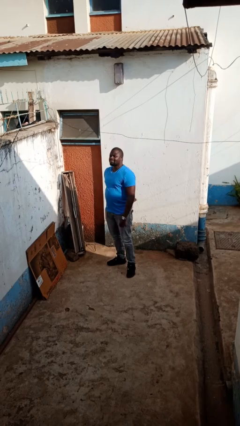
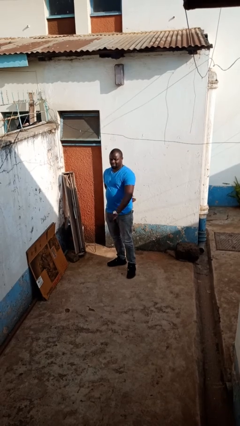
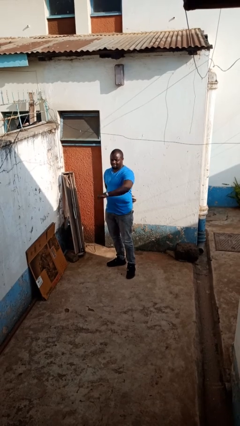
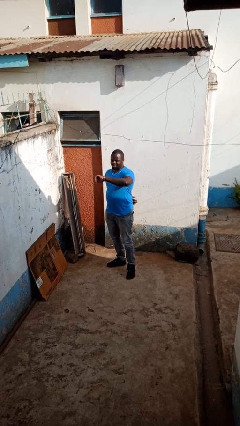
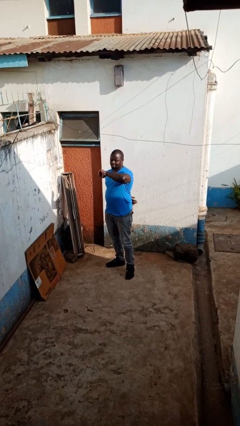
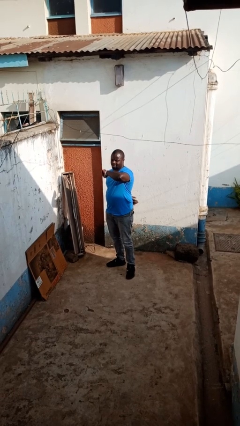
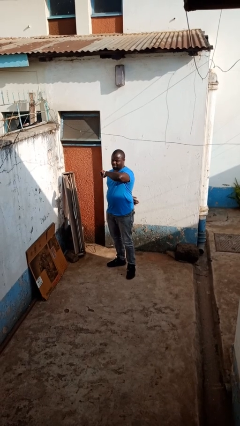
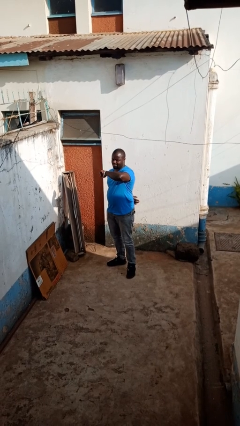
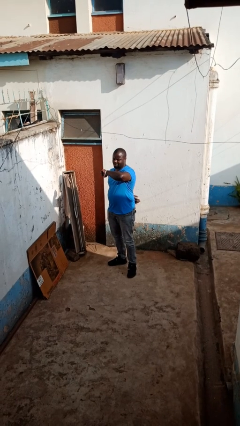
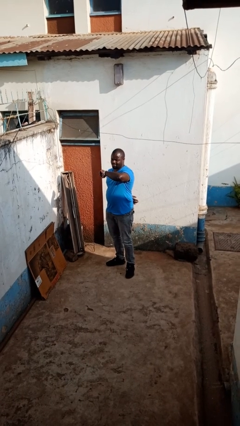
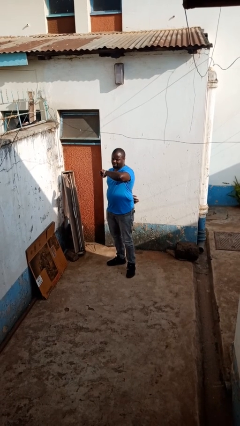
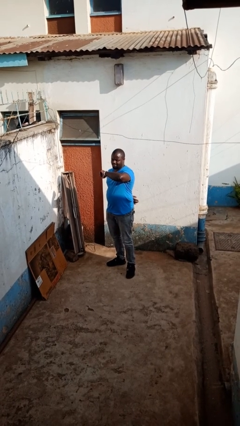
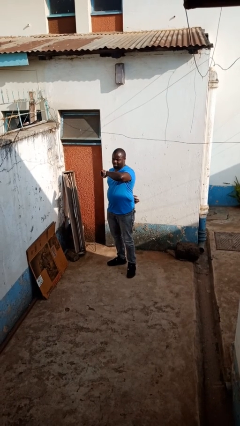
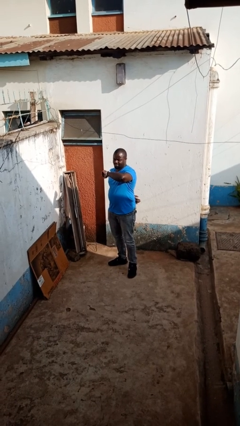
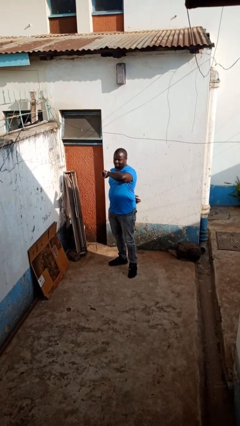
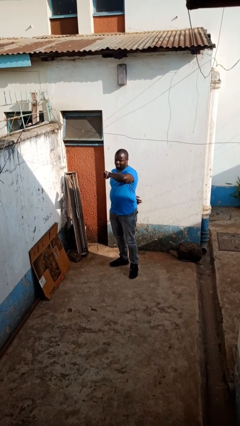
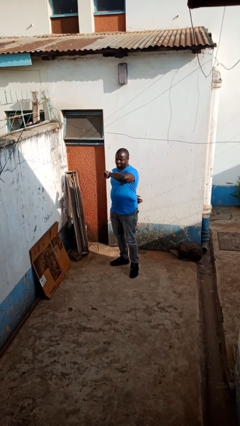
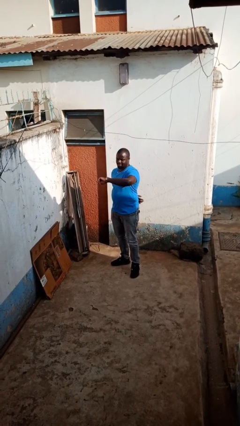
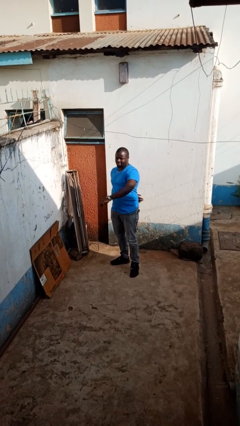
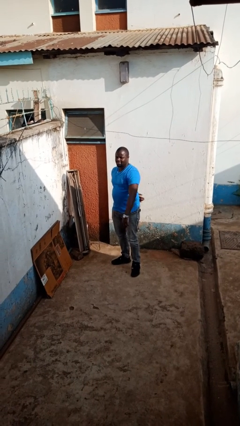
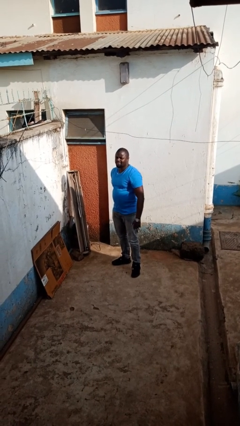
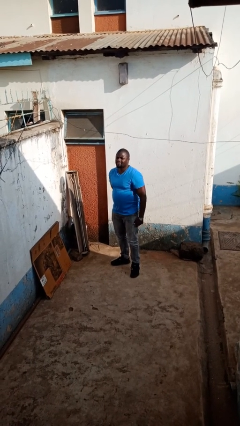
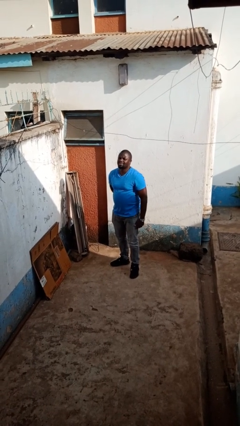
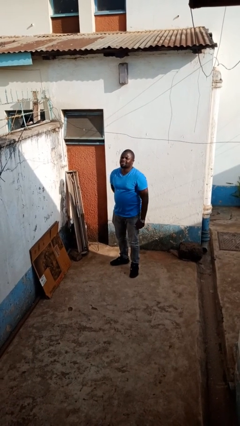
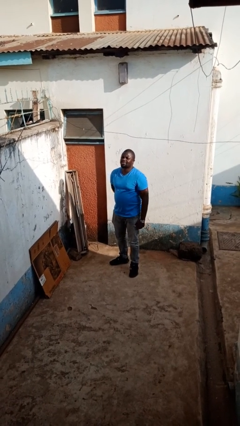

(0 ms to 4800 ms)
person looks at wristwatch

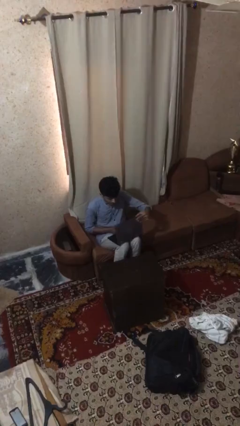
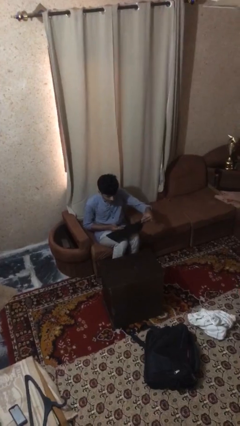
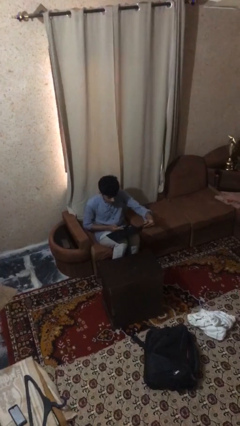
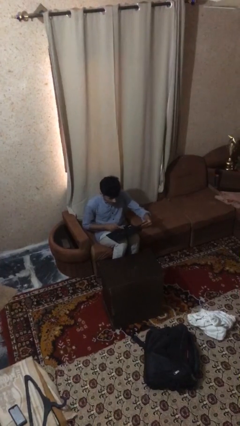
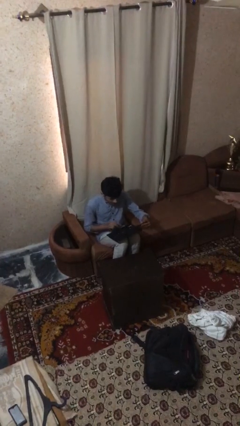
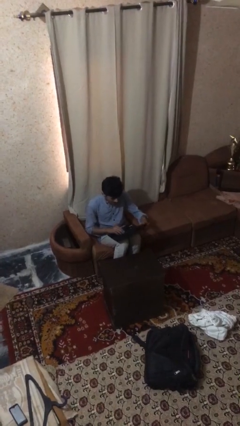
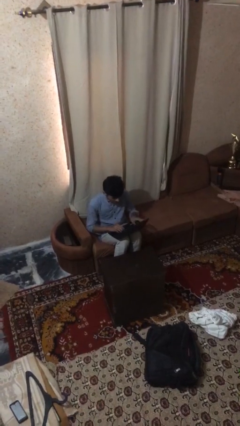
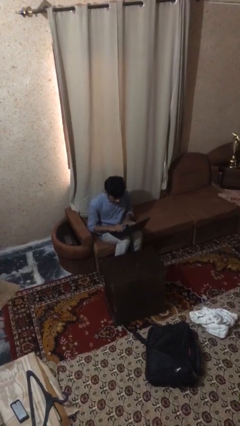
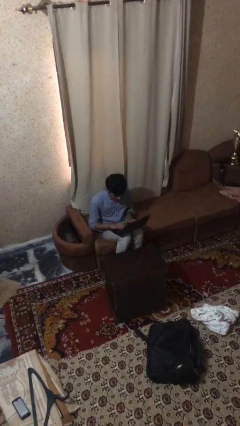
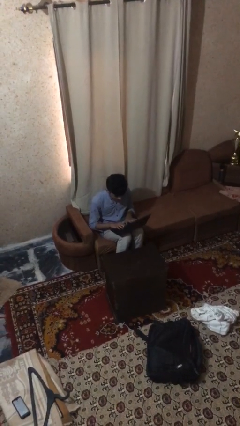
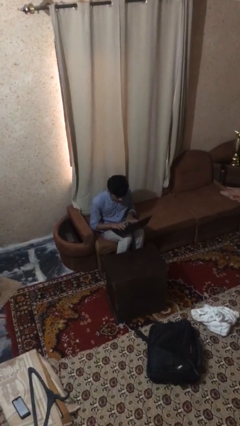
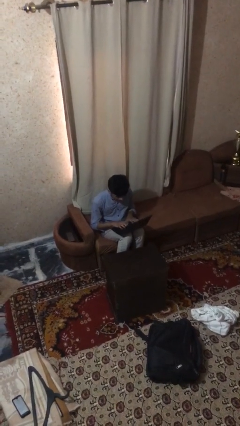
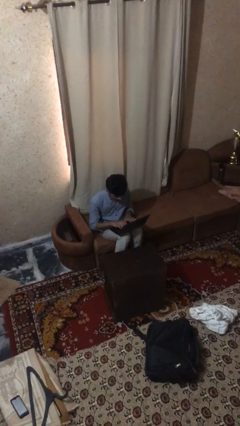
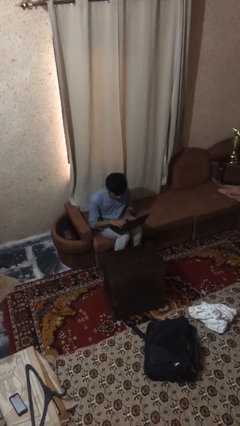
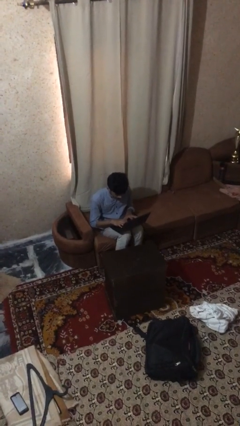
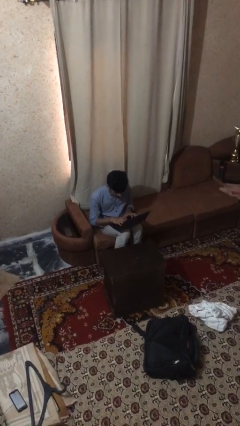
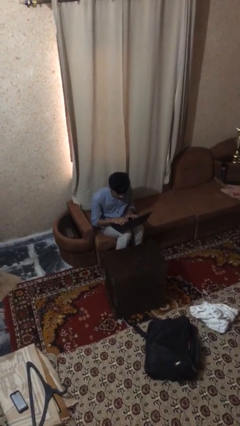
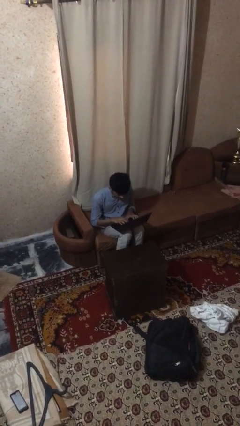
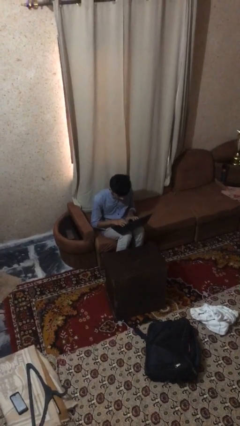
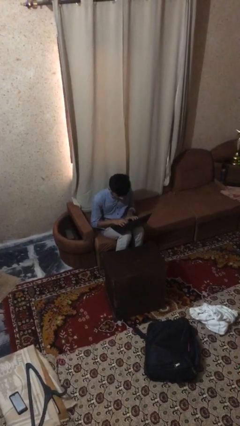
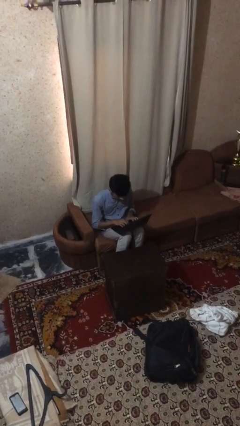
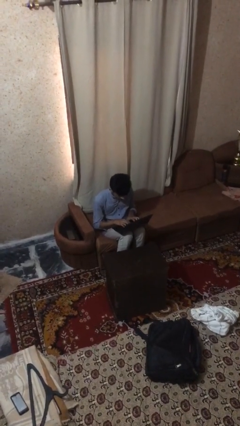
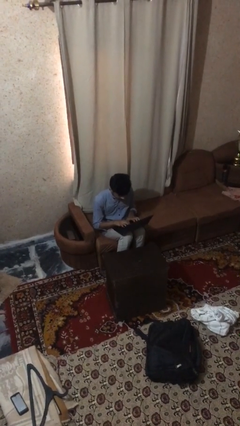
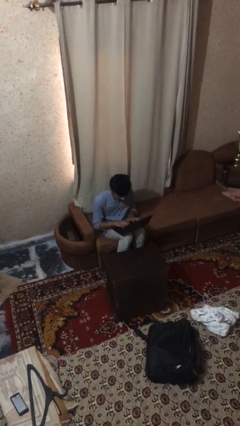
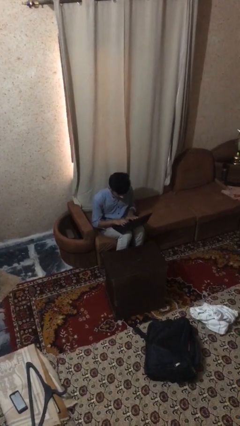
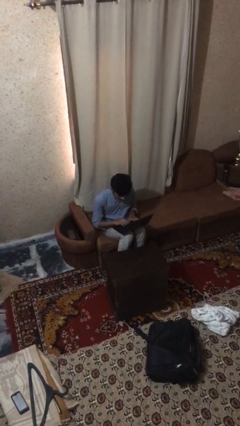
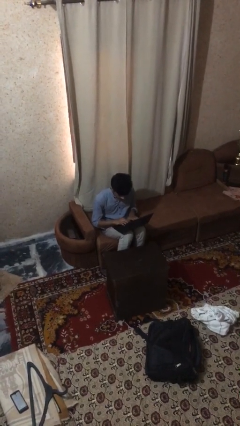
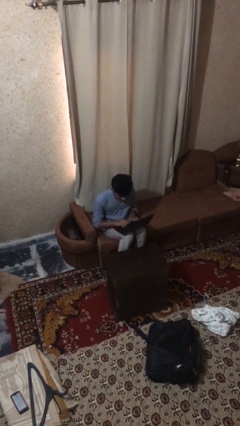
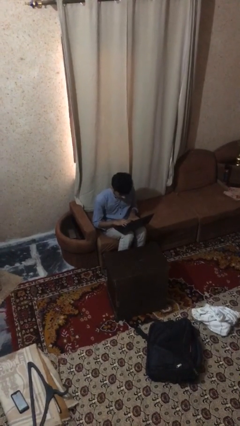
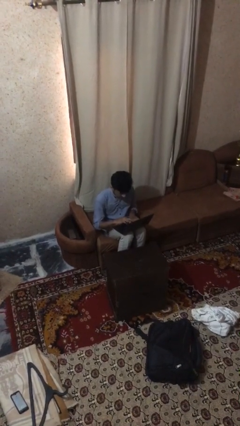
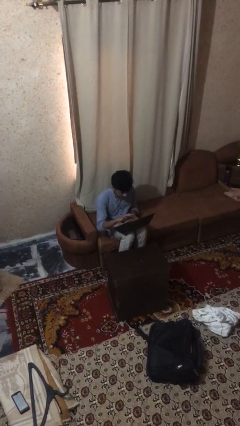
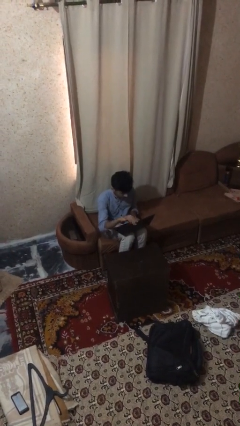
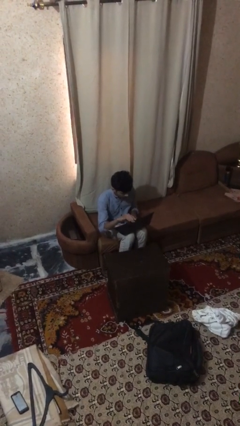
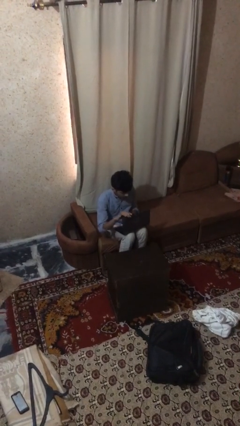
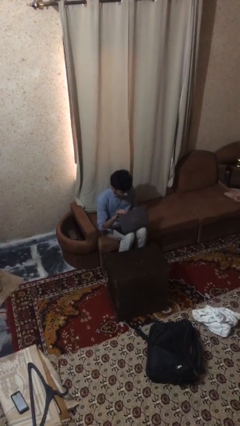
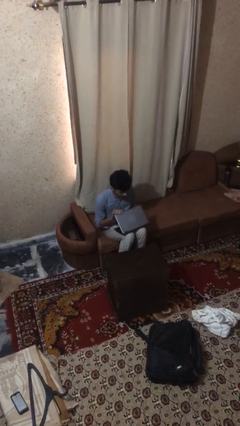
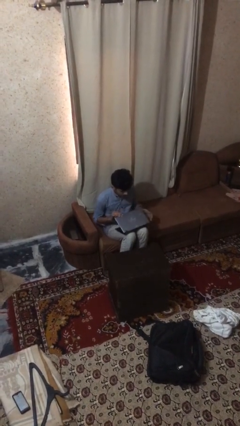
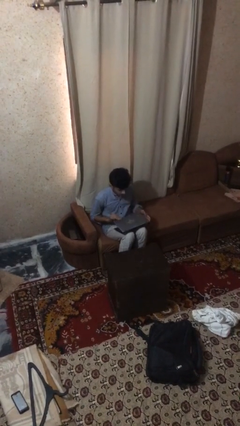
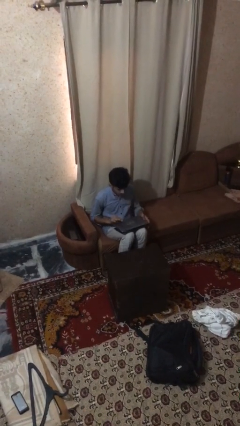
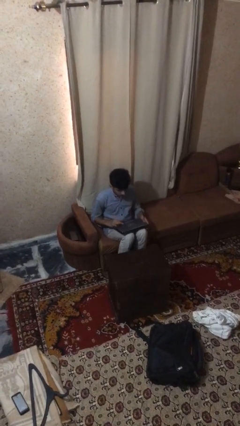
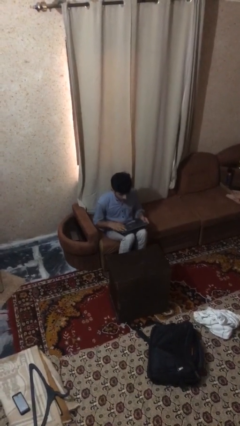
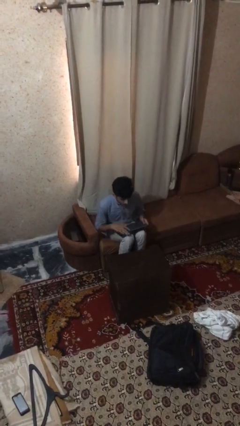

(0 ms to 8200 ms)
person interacts with laptop

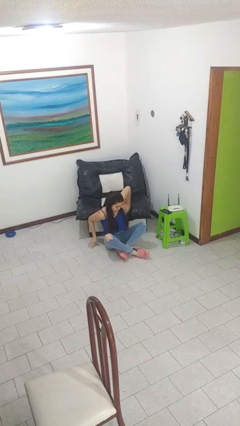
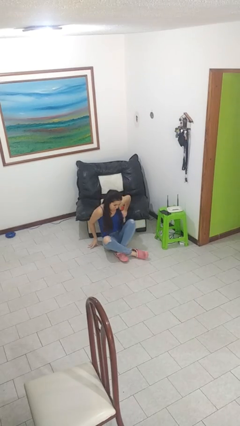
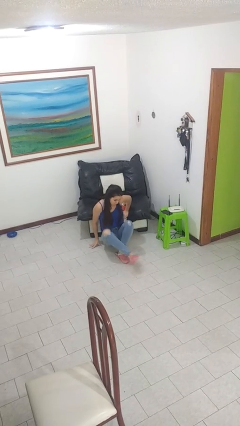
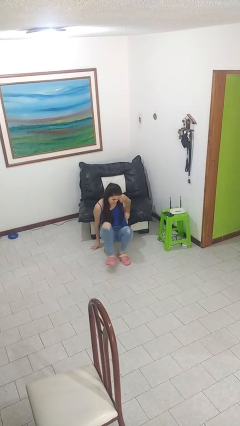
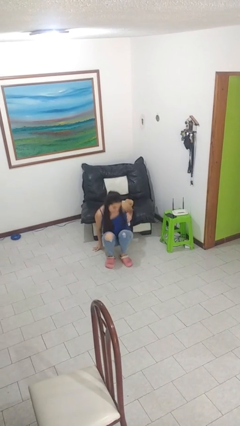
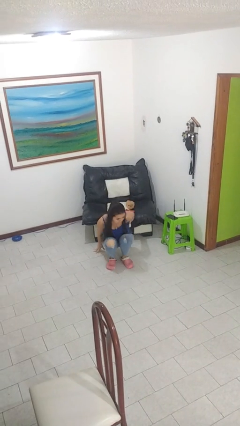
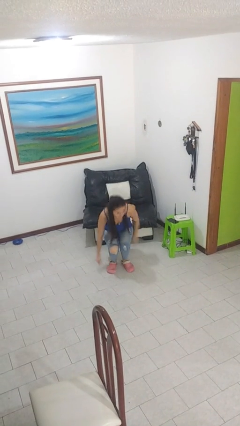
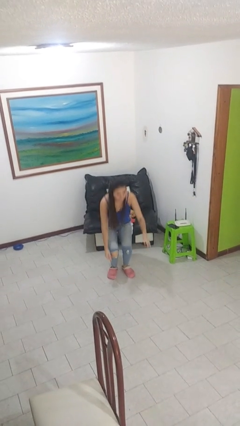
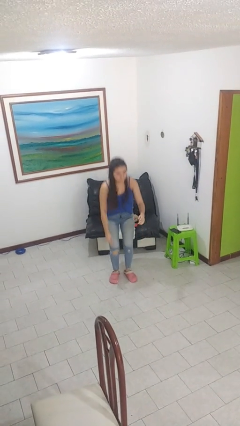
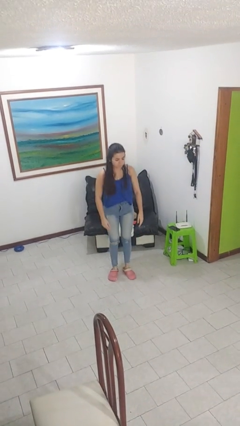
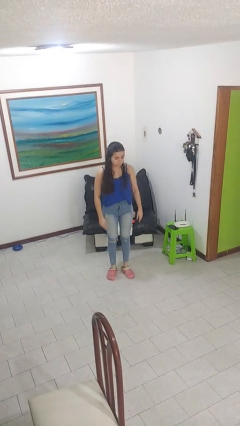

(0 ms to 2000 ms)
person stands up from floor

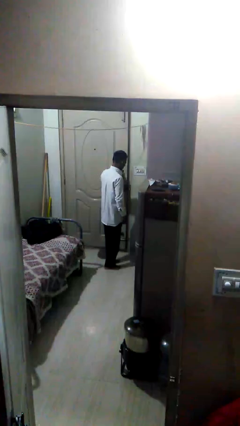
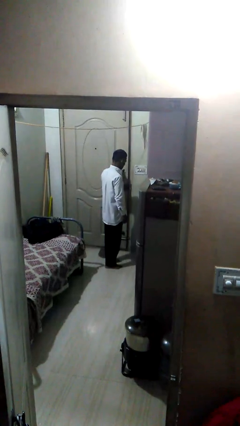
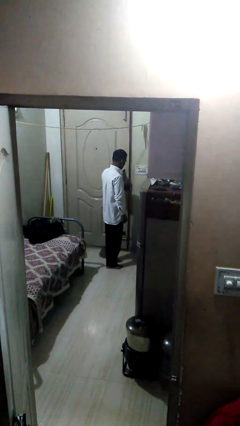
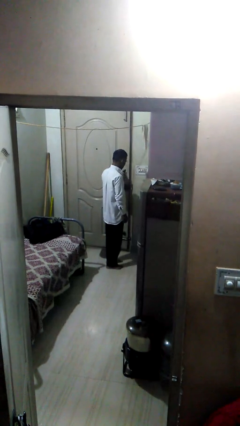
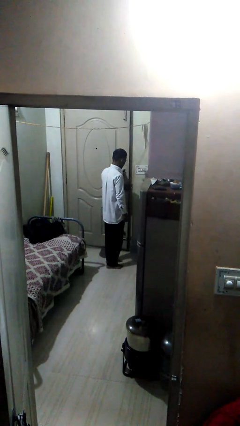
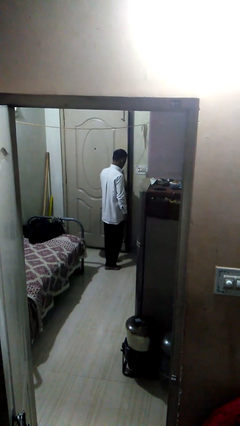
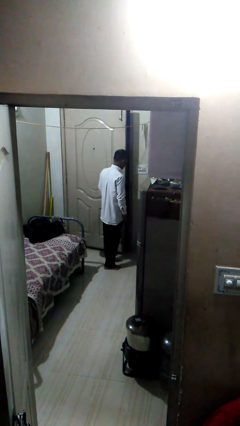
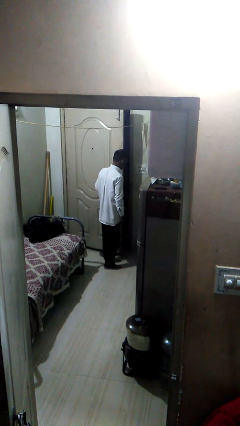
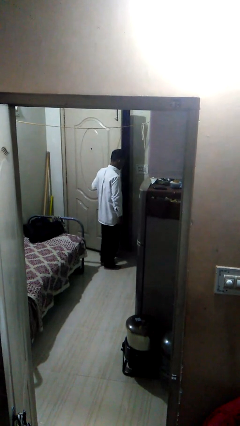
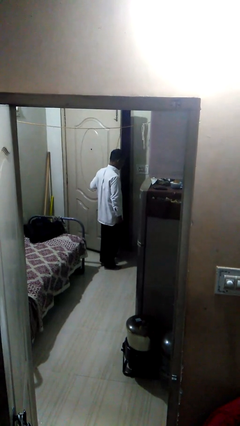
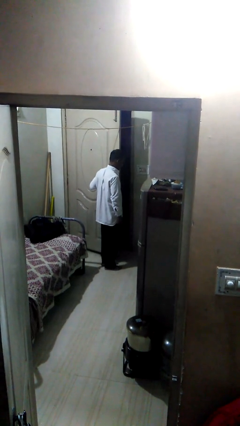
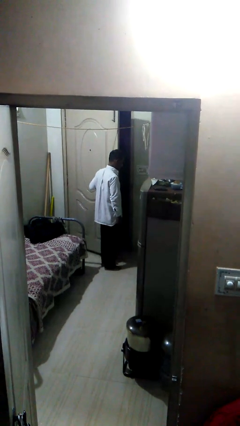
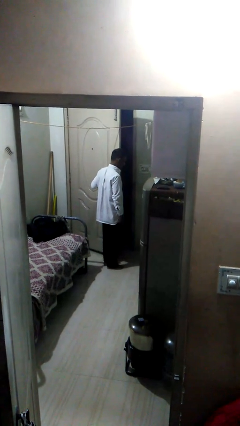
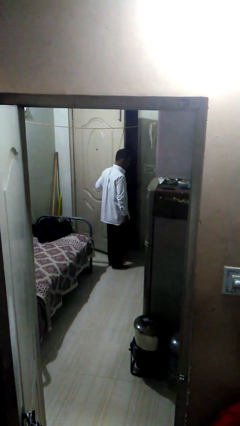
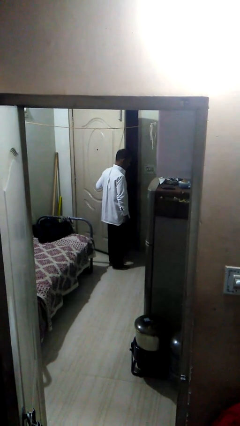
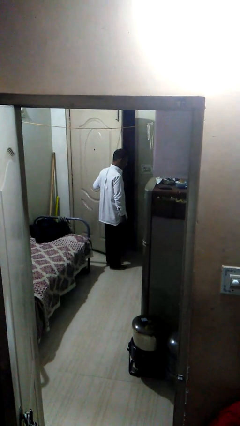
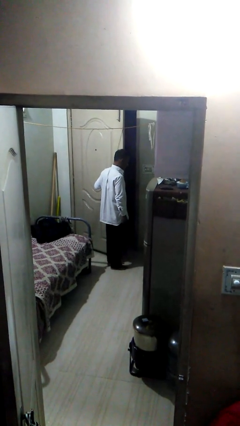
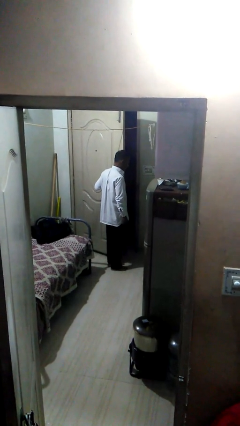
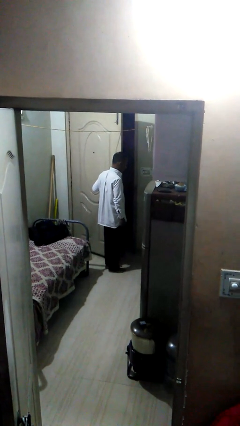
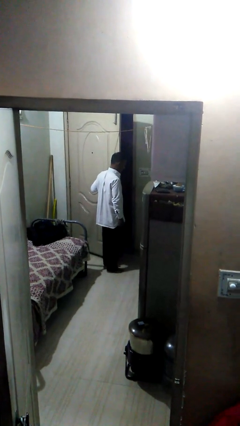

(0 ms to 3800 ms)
person opens facility door
